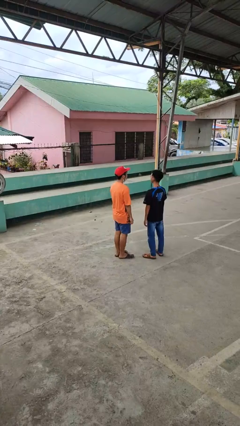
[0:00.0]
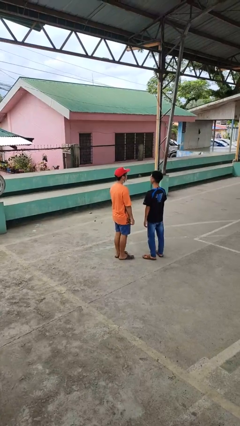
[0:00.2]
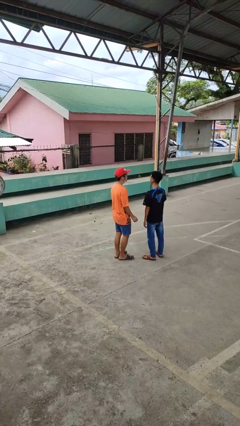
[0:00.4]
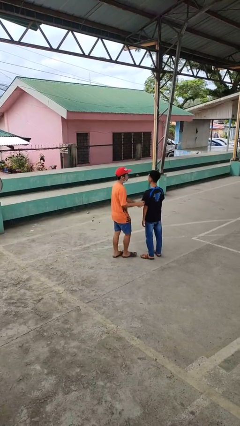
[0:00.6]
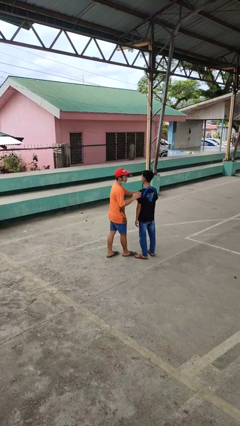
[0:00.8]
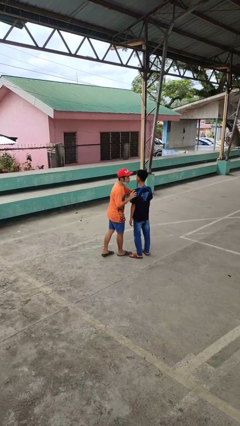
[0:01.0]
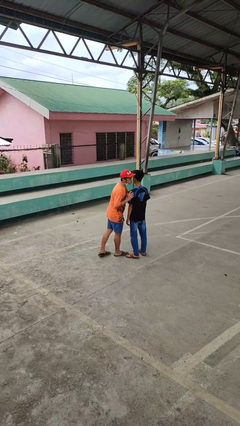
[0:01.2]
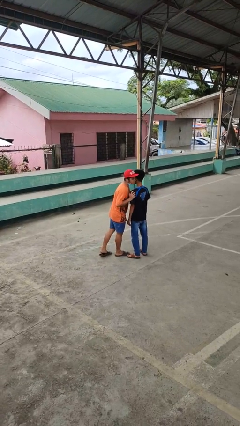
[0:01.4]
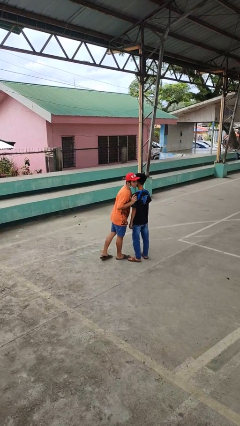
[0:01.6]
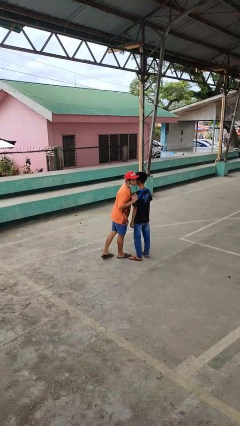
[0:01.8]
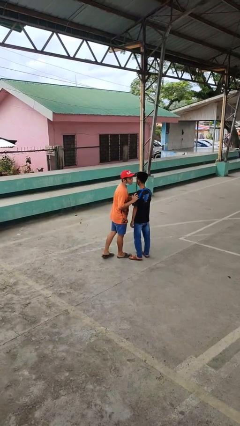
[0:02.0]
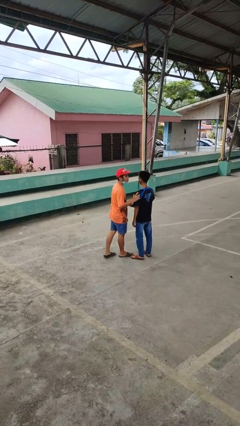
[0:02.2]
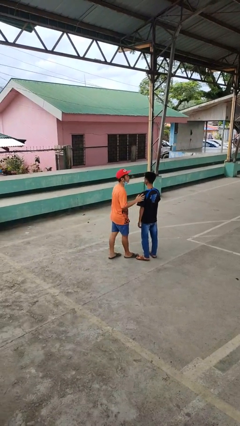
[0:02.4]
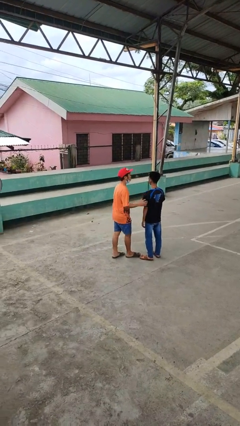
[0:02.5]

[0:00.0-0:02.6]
person kisses cheek of person

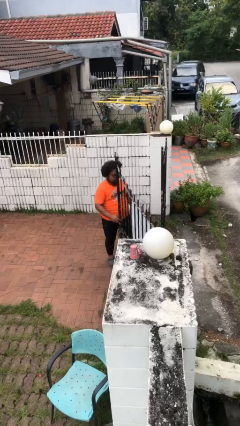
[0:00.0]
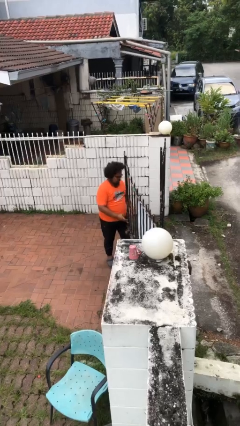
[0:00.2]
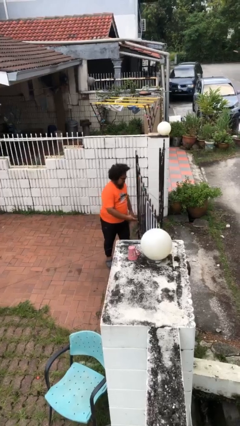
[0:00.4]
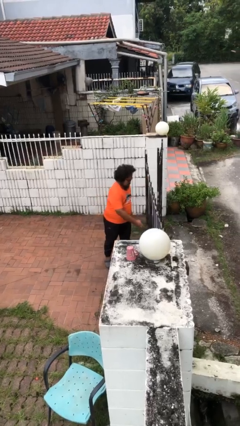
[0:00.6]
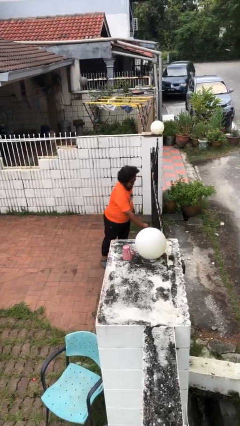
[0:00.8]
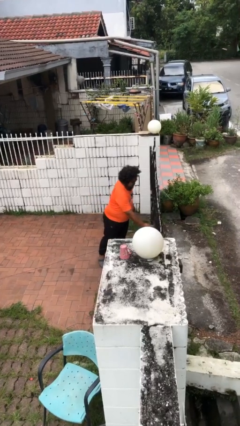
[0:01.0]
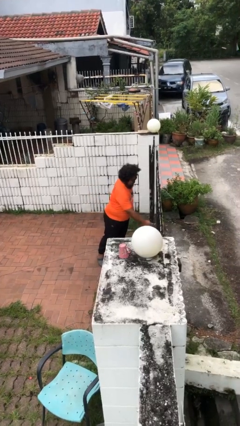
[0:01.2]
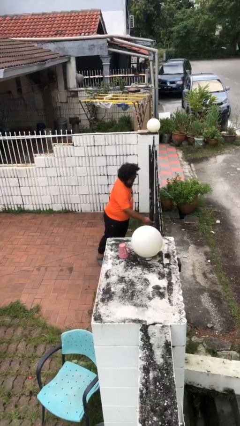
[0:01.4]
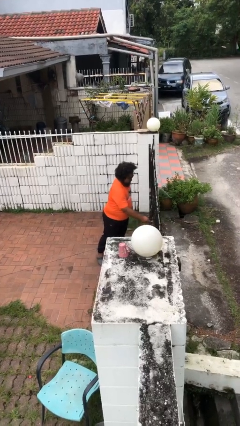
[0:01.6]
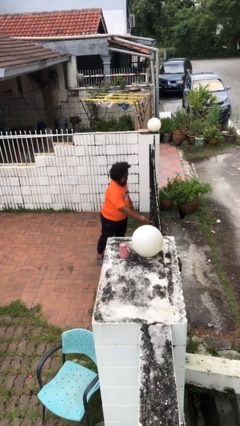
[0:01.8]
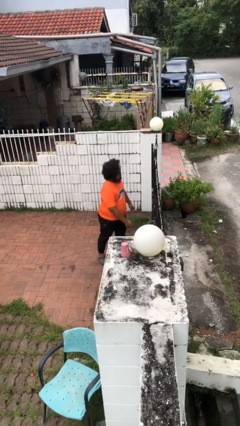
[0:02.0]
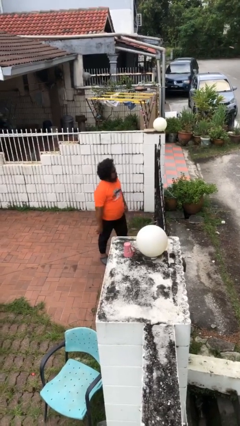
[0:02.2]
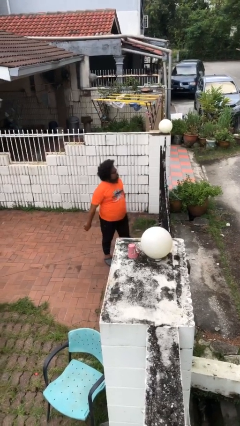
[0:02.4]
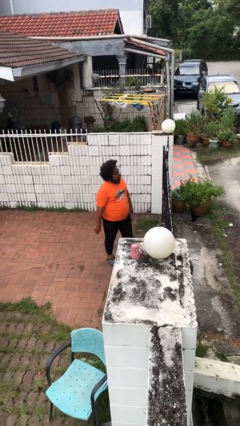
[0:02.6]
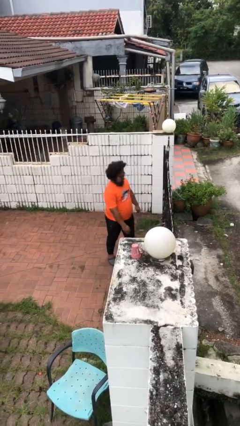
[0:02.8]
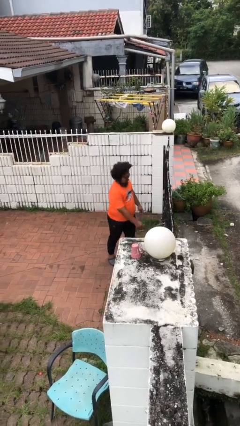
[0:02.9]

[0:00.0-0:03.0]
person closes facility door

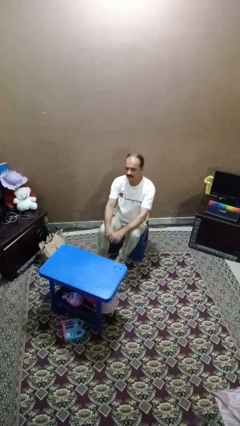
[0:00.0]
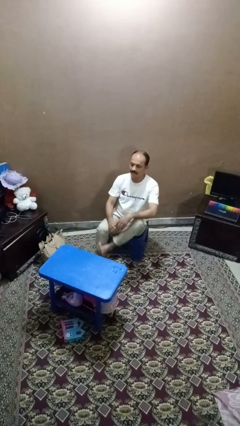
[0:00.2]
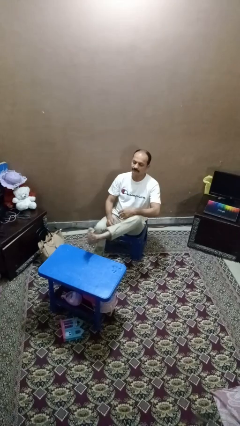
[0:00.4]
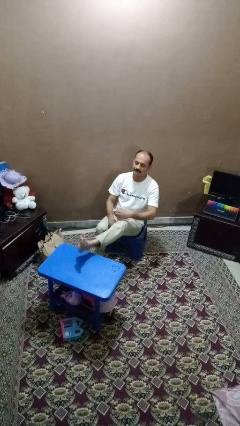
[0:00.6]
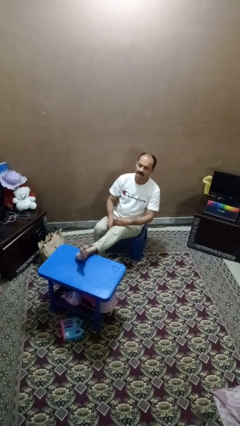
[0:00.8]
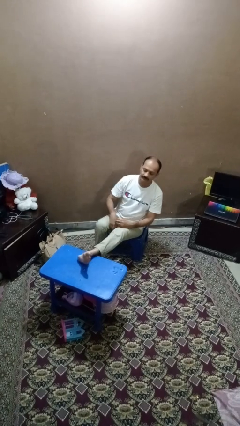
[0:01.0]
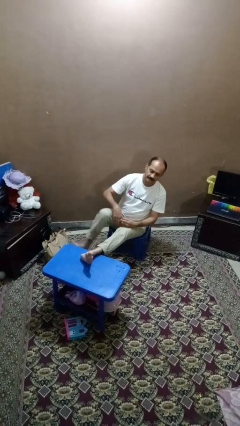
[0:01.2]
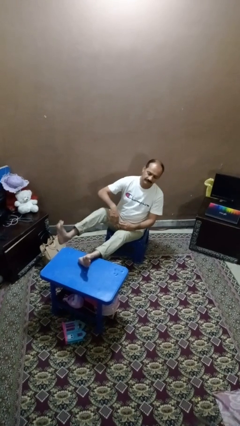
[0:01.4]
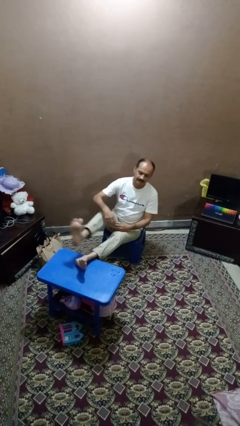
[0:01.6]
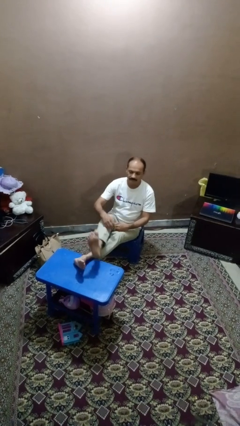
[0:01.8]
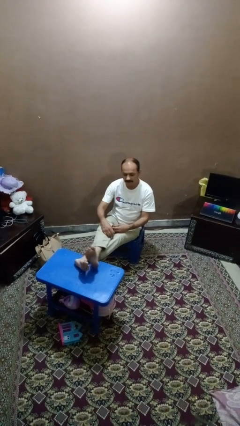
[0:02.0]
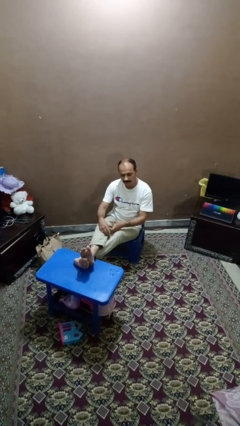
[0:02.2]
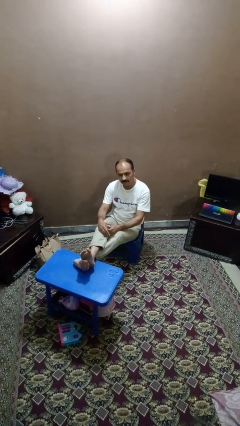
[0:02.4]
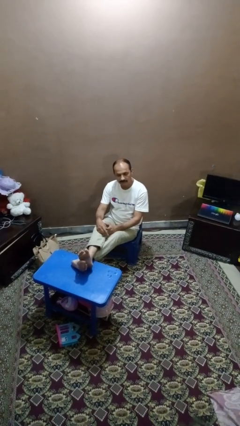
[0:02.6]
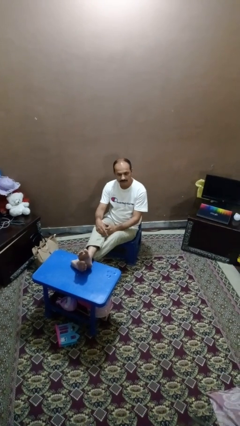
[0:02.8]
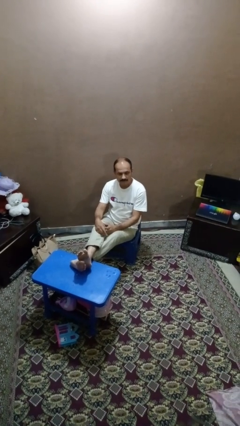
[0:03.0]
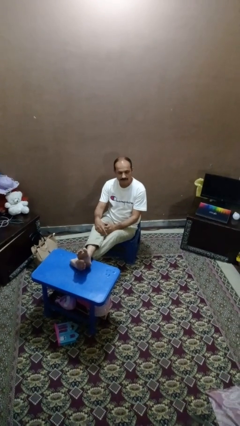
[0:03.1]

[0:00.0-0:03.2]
person puts feet up

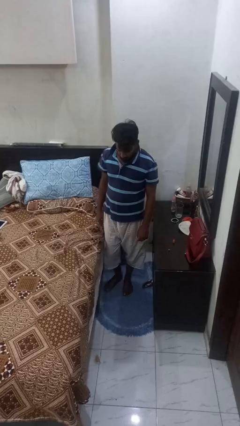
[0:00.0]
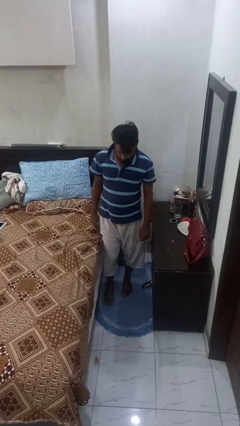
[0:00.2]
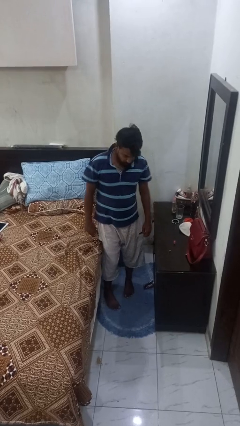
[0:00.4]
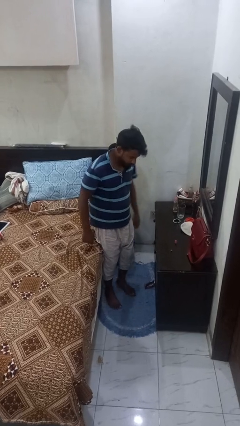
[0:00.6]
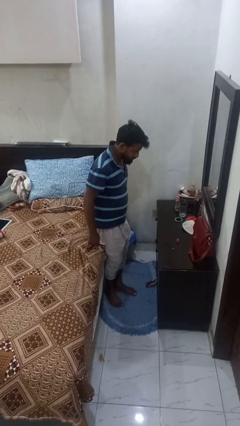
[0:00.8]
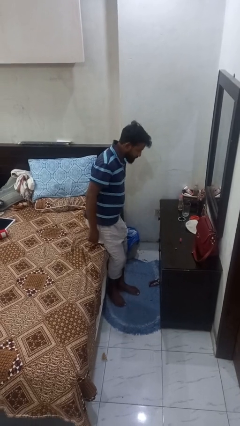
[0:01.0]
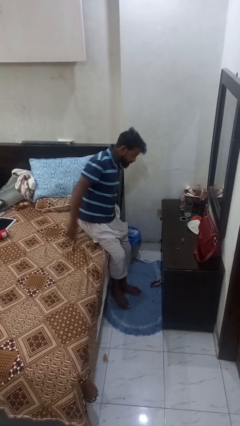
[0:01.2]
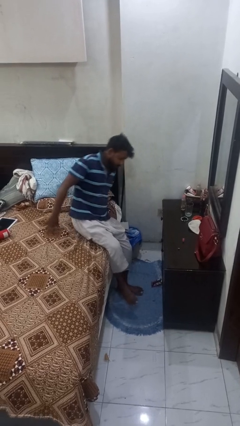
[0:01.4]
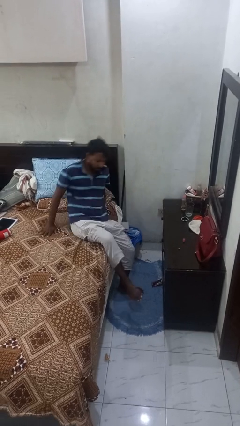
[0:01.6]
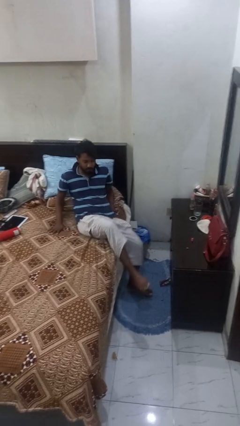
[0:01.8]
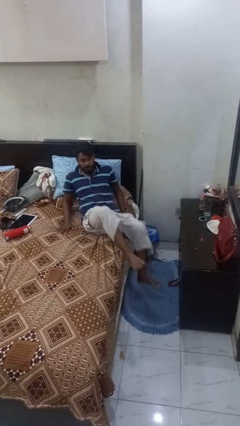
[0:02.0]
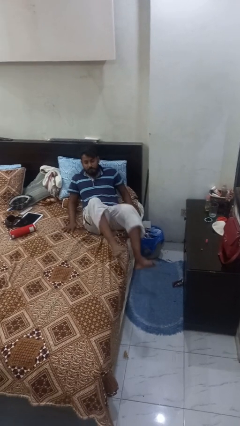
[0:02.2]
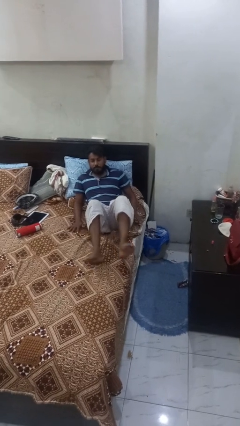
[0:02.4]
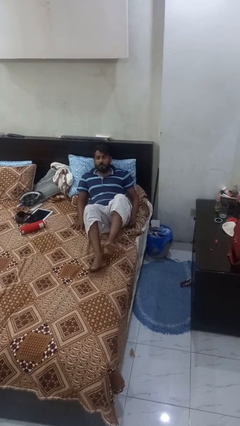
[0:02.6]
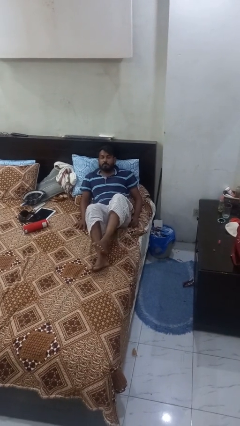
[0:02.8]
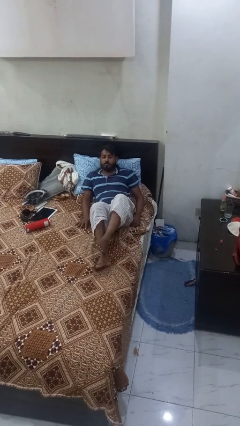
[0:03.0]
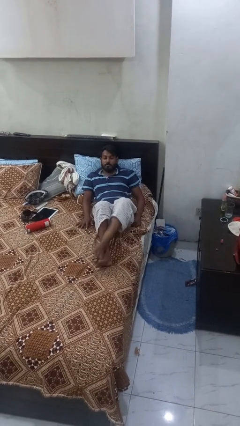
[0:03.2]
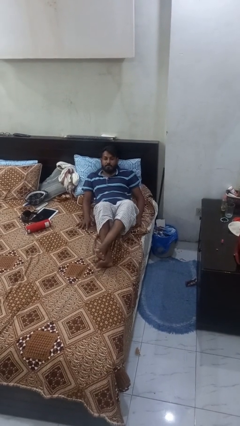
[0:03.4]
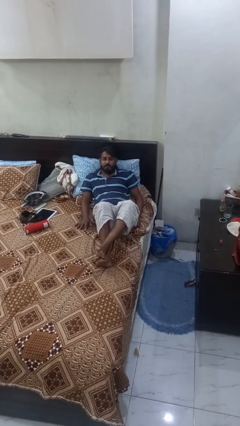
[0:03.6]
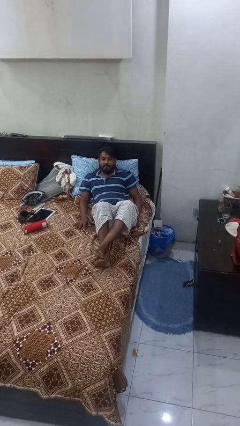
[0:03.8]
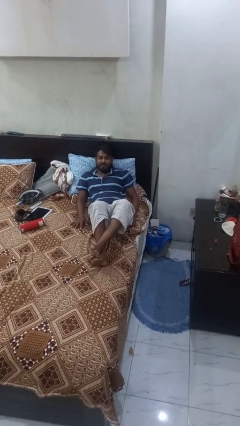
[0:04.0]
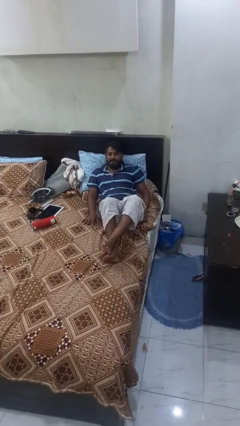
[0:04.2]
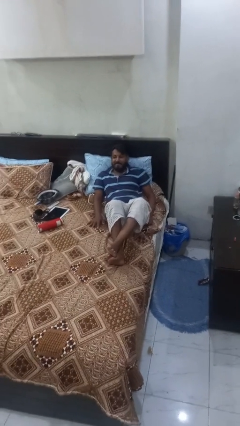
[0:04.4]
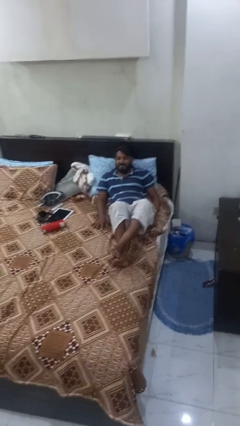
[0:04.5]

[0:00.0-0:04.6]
person lies down on bed

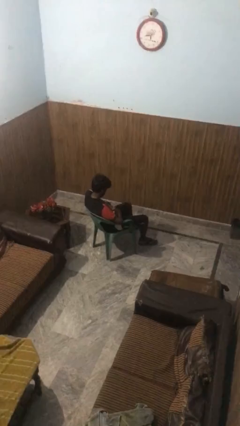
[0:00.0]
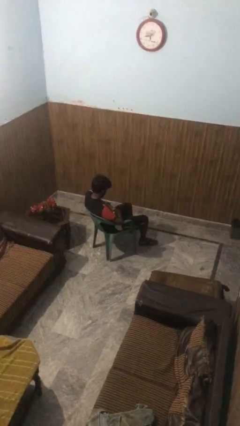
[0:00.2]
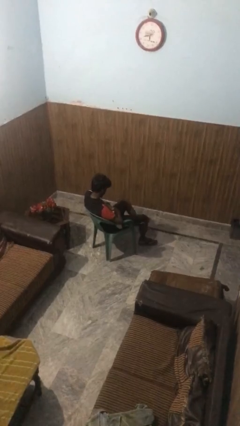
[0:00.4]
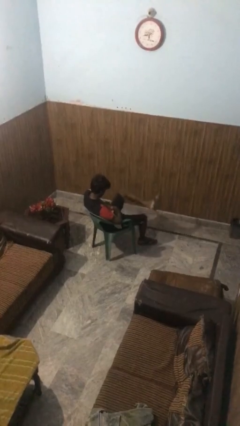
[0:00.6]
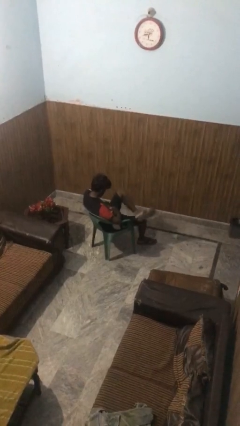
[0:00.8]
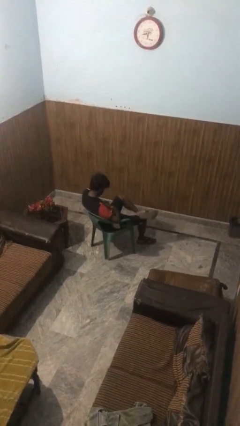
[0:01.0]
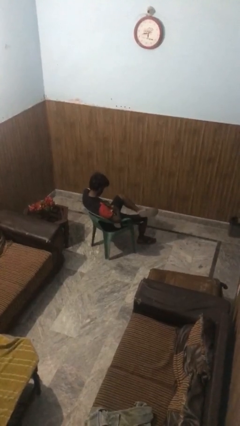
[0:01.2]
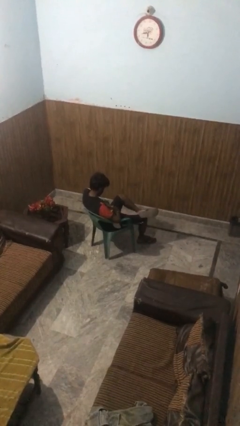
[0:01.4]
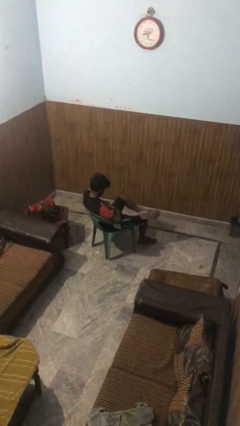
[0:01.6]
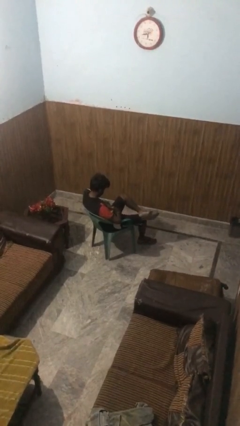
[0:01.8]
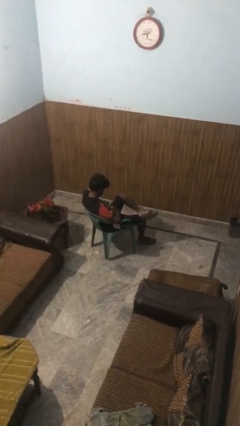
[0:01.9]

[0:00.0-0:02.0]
person crosses legs

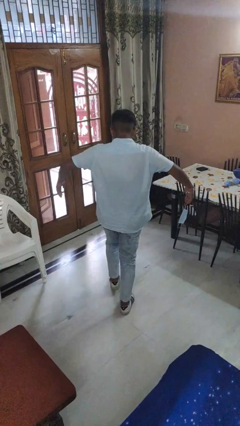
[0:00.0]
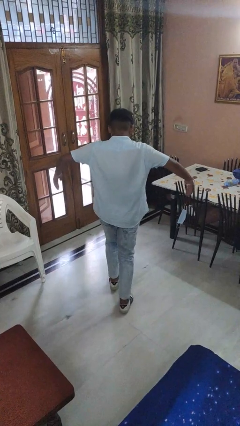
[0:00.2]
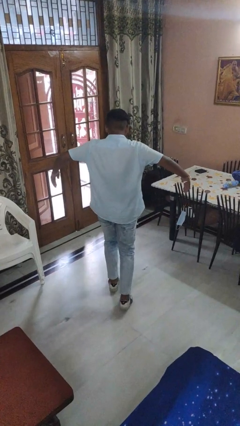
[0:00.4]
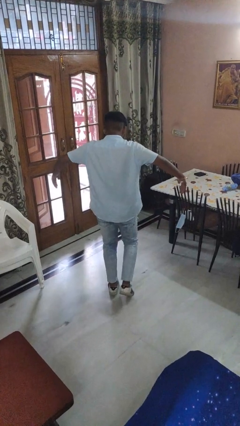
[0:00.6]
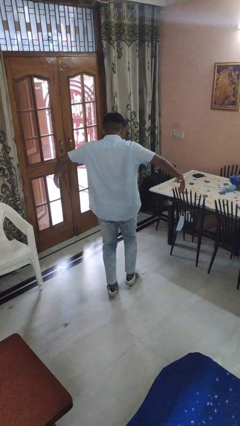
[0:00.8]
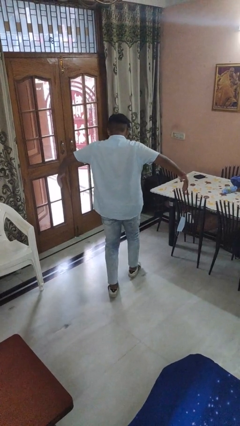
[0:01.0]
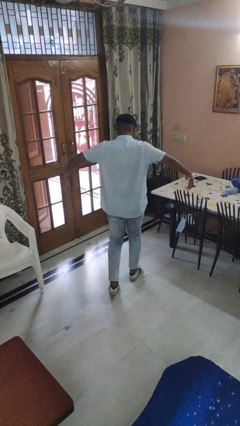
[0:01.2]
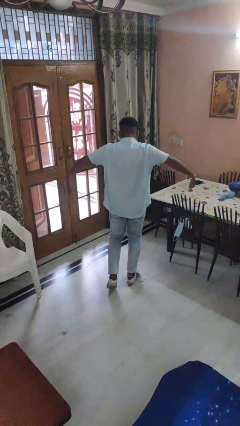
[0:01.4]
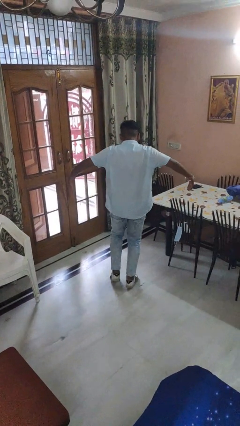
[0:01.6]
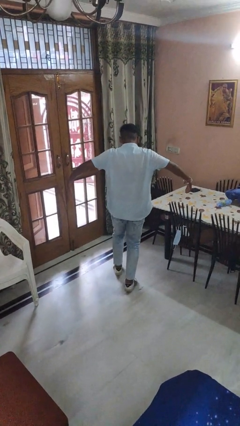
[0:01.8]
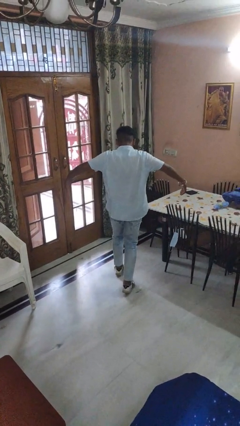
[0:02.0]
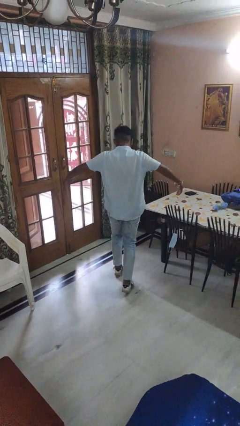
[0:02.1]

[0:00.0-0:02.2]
person walks tiptoe
